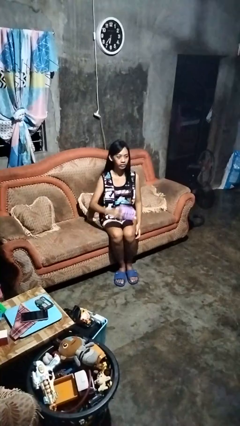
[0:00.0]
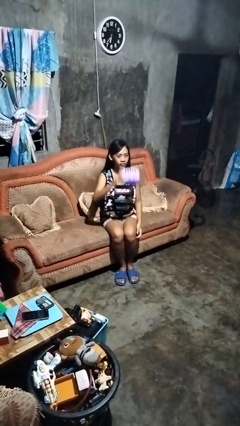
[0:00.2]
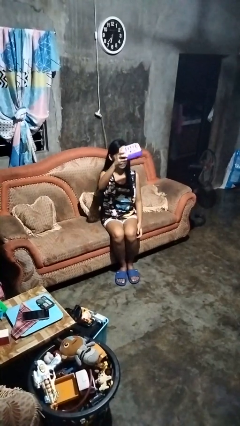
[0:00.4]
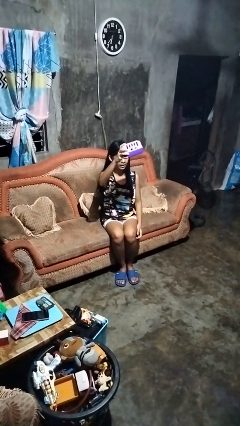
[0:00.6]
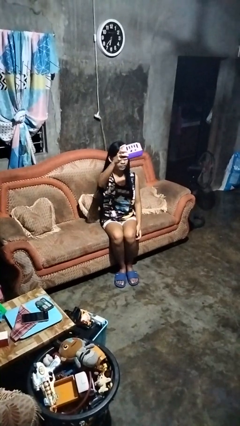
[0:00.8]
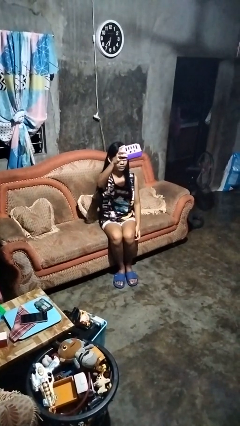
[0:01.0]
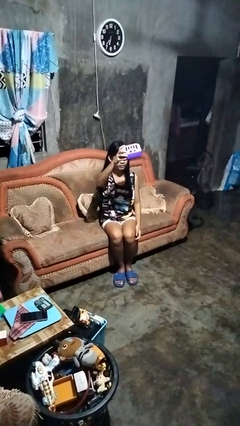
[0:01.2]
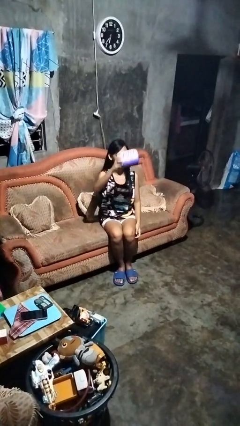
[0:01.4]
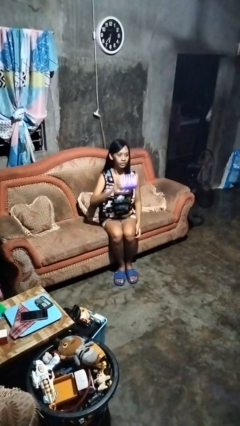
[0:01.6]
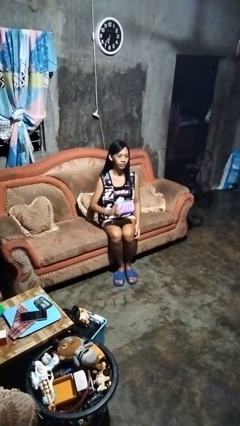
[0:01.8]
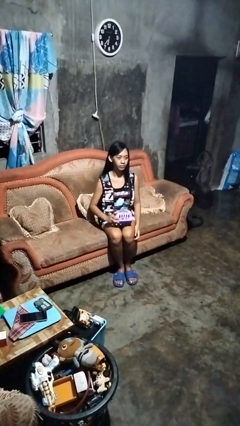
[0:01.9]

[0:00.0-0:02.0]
person holds object above head

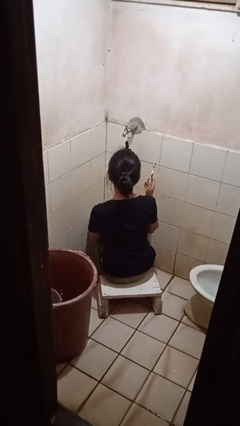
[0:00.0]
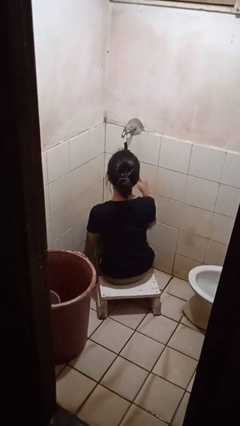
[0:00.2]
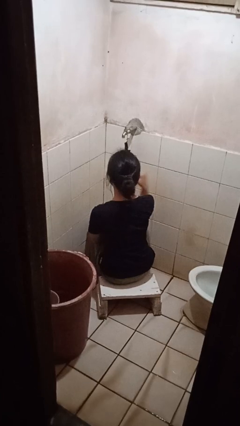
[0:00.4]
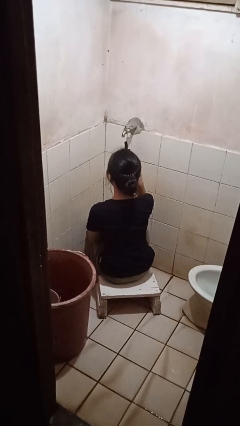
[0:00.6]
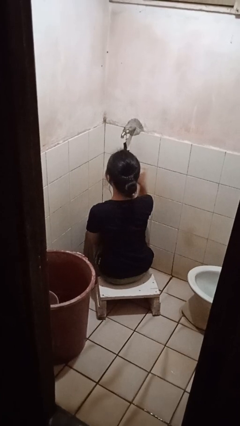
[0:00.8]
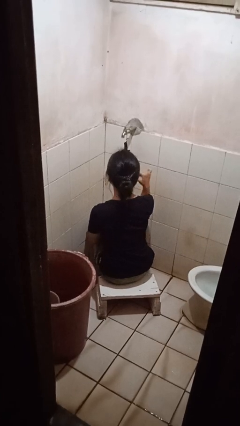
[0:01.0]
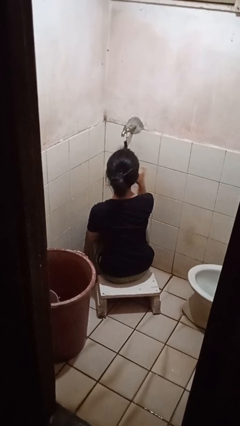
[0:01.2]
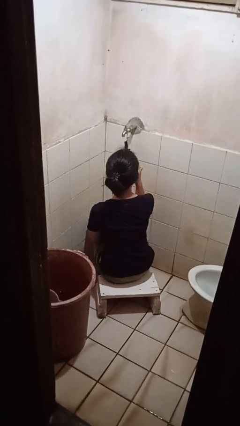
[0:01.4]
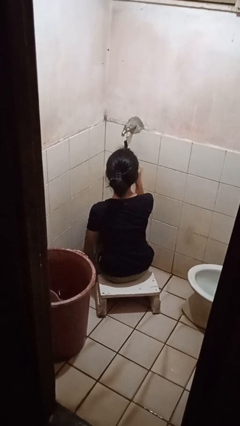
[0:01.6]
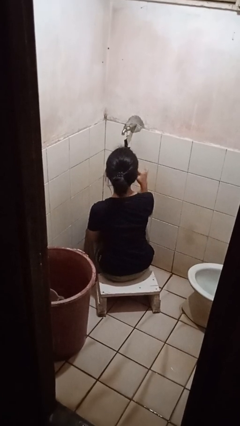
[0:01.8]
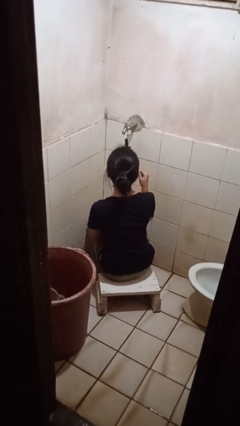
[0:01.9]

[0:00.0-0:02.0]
person brushes teeth

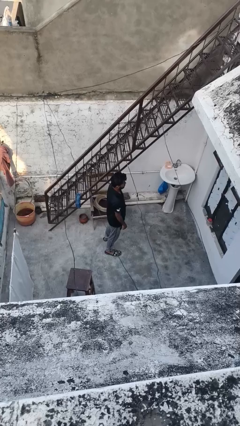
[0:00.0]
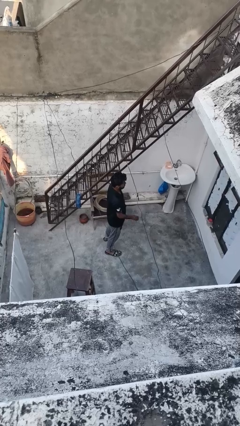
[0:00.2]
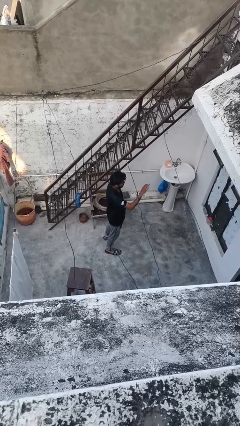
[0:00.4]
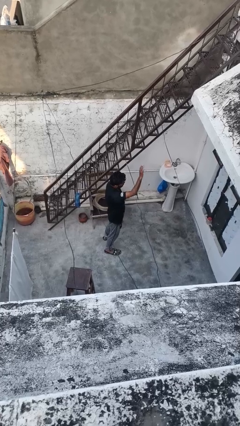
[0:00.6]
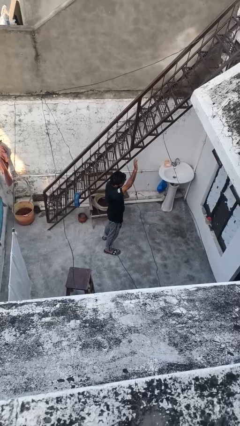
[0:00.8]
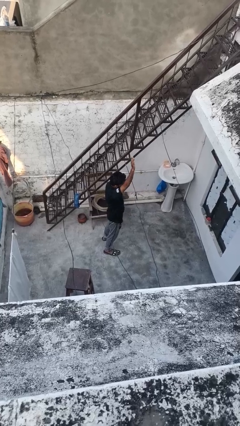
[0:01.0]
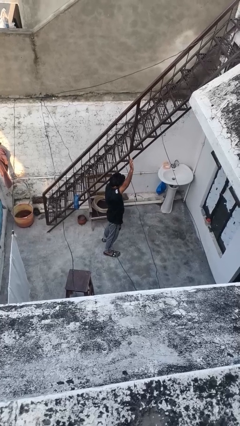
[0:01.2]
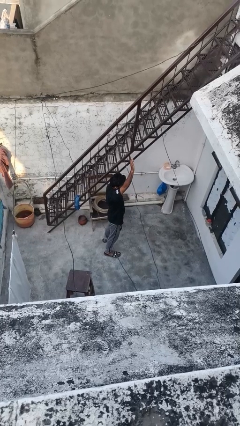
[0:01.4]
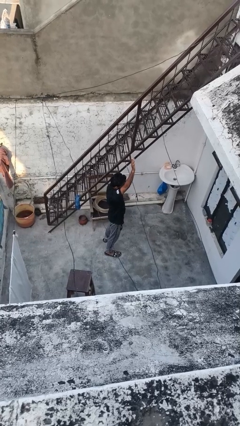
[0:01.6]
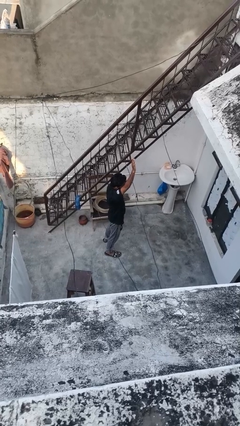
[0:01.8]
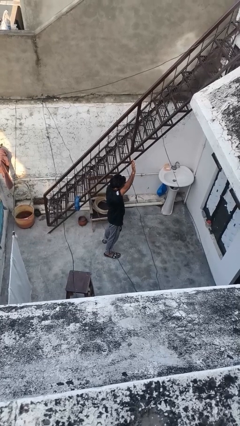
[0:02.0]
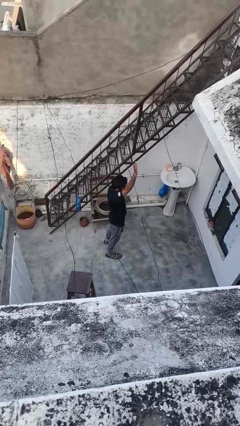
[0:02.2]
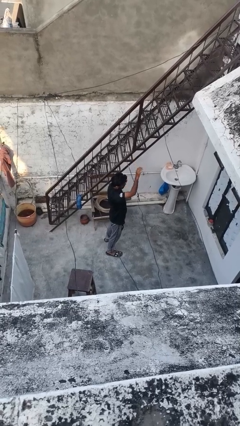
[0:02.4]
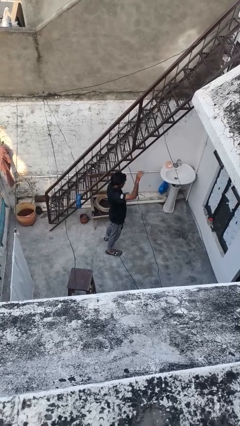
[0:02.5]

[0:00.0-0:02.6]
person gestures raise hand

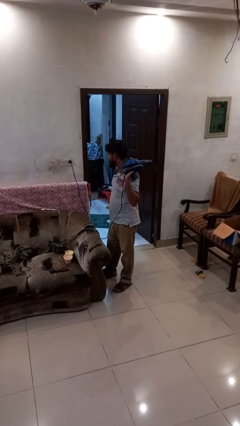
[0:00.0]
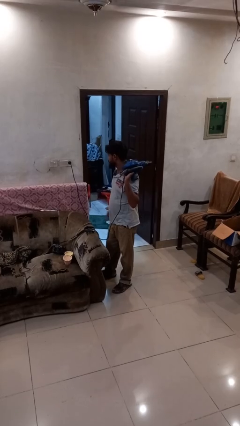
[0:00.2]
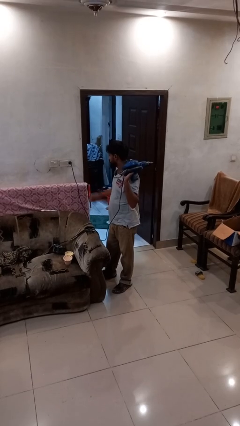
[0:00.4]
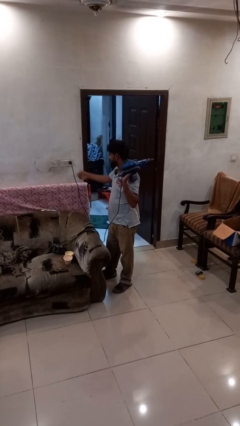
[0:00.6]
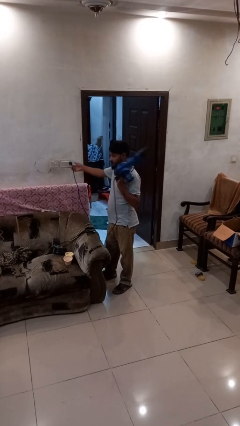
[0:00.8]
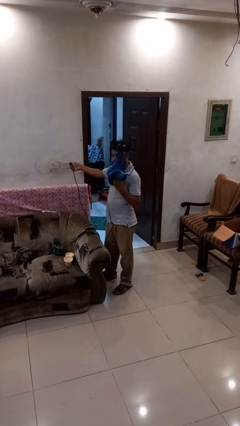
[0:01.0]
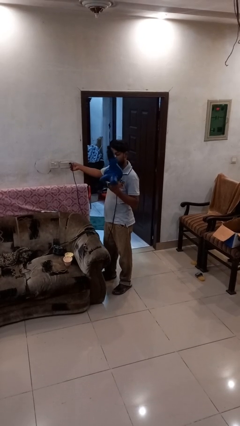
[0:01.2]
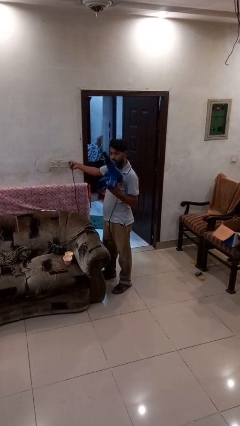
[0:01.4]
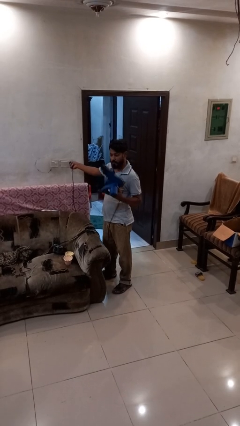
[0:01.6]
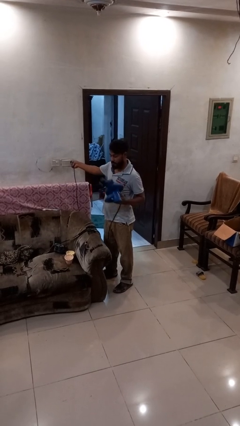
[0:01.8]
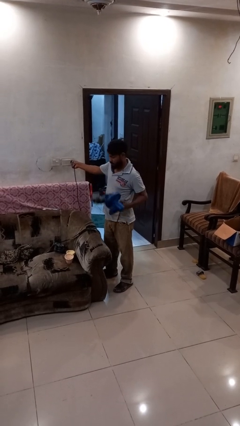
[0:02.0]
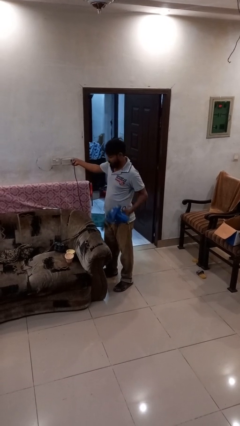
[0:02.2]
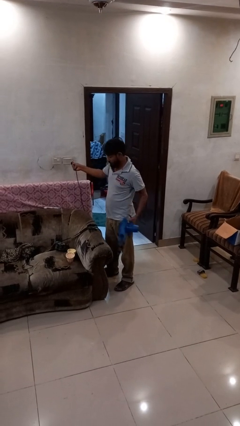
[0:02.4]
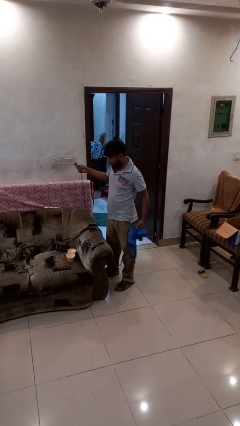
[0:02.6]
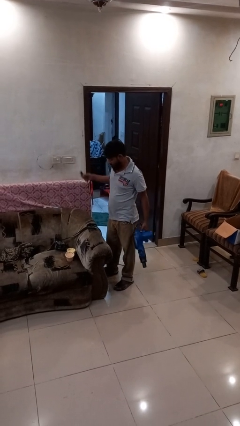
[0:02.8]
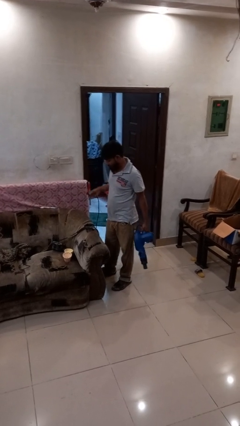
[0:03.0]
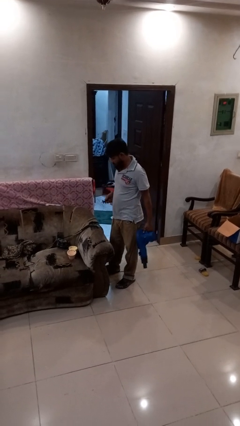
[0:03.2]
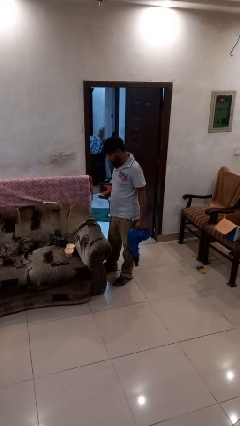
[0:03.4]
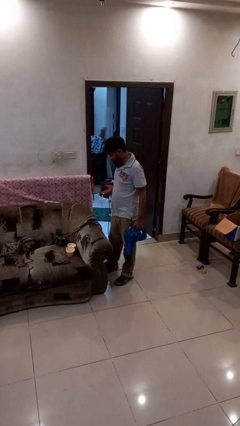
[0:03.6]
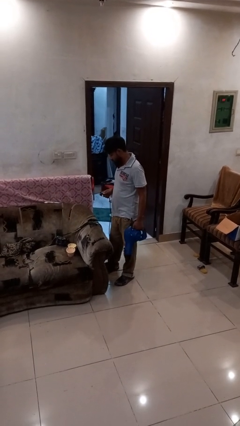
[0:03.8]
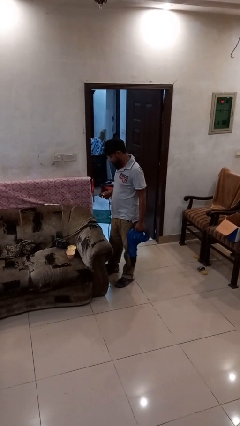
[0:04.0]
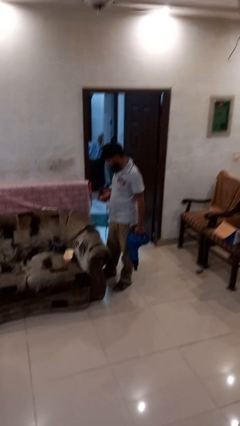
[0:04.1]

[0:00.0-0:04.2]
person unplugs from electrical socket

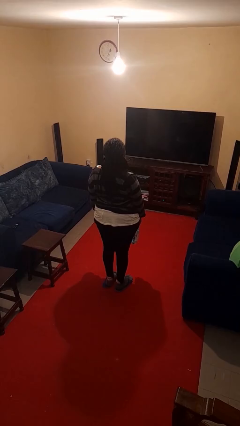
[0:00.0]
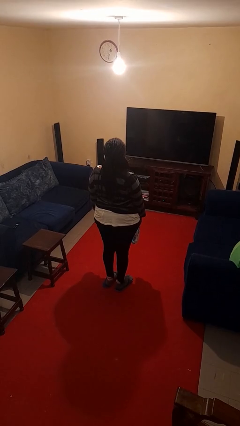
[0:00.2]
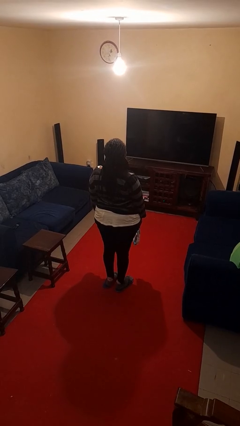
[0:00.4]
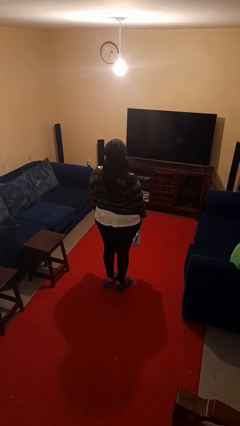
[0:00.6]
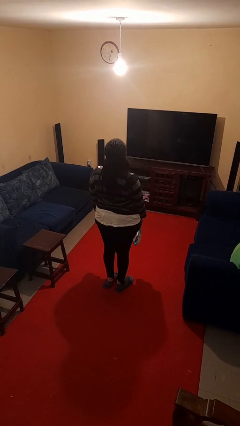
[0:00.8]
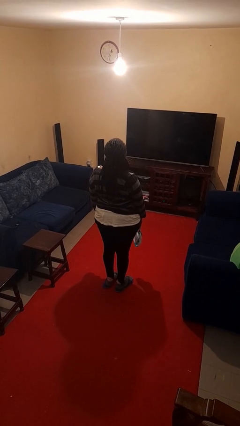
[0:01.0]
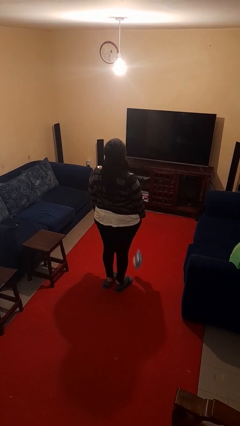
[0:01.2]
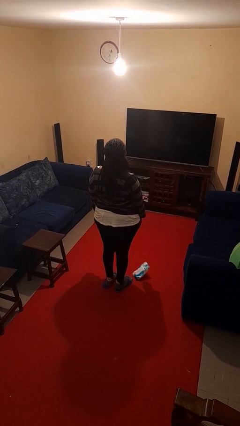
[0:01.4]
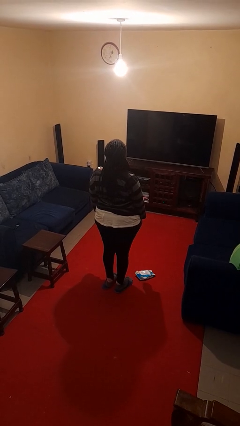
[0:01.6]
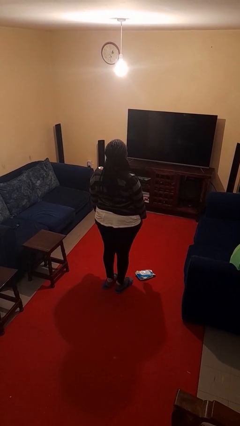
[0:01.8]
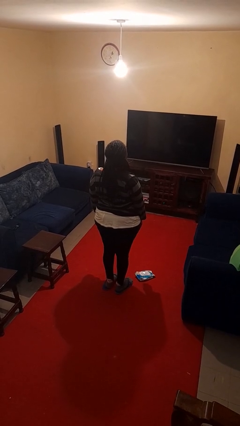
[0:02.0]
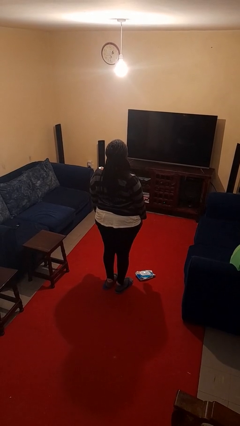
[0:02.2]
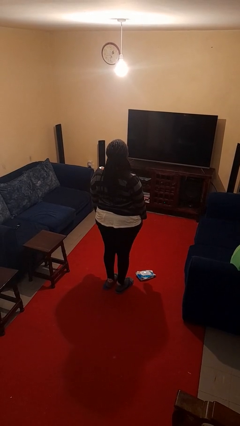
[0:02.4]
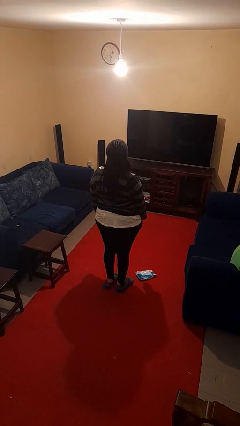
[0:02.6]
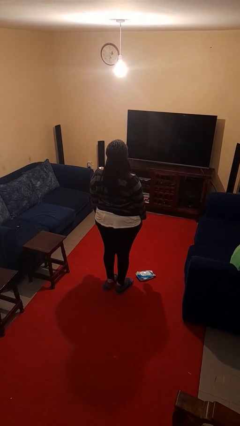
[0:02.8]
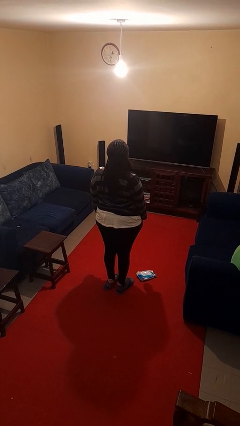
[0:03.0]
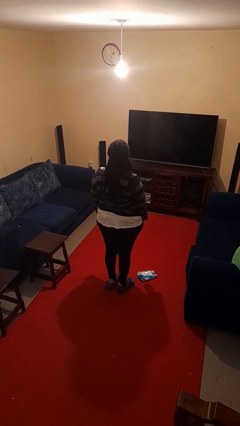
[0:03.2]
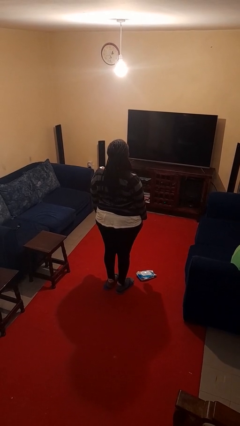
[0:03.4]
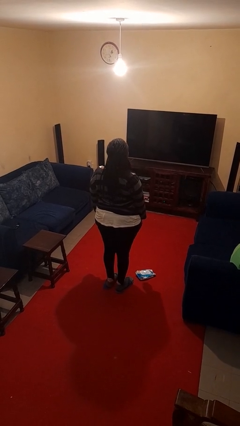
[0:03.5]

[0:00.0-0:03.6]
person drops object

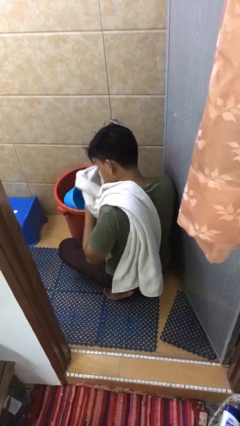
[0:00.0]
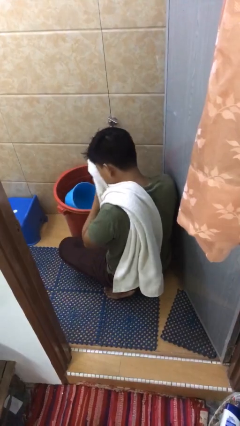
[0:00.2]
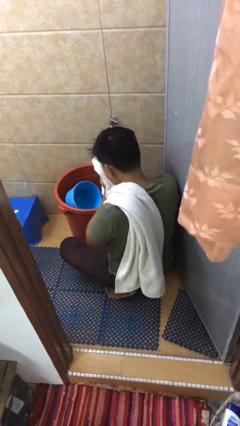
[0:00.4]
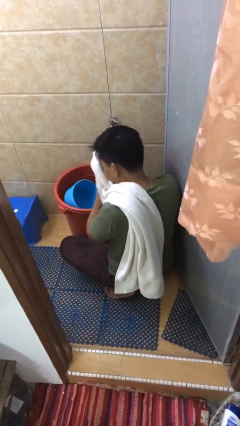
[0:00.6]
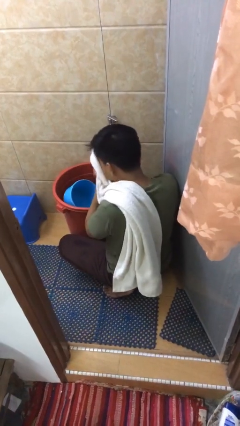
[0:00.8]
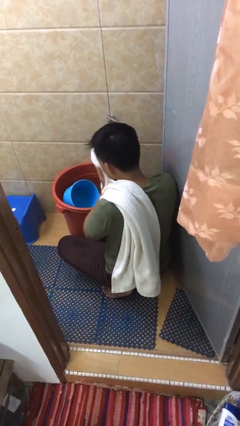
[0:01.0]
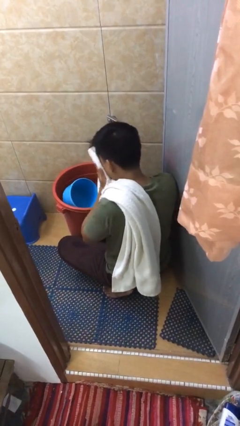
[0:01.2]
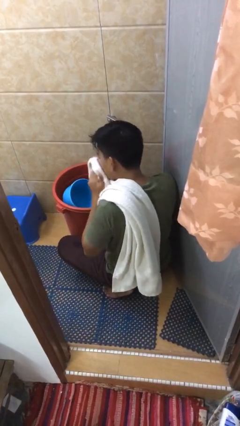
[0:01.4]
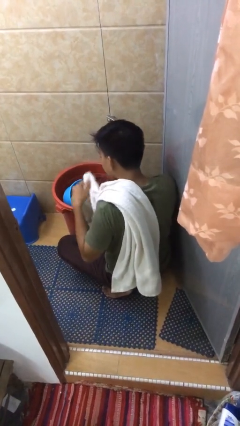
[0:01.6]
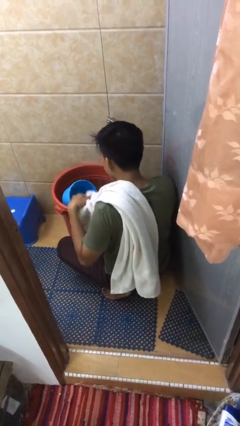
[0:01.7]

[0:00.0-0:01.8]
person dries face with towel

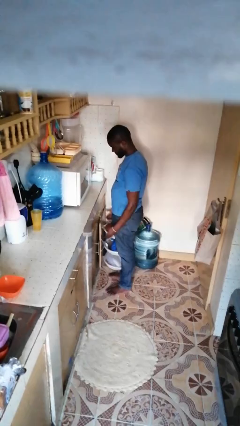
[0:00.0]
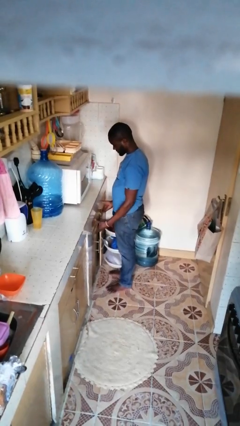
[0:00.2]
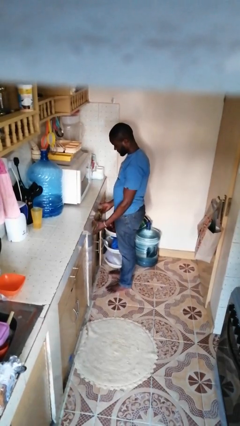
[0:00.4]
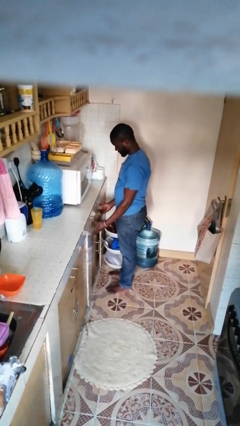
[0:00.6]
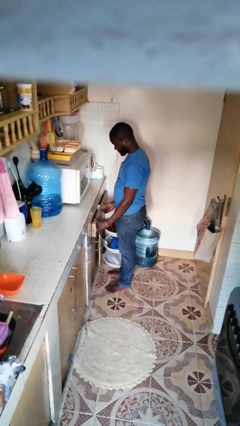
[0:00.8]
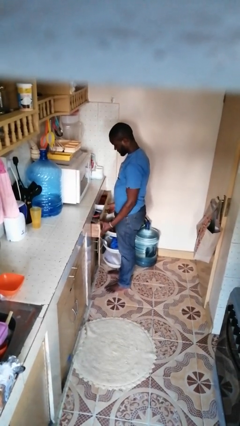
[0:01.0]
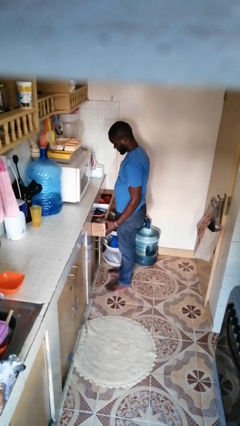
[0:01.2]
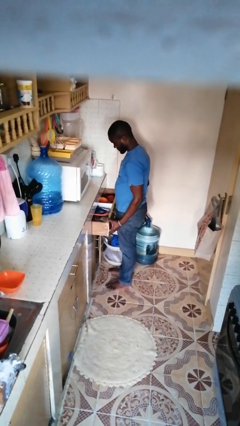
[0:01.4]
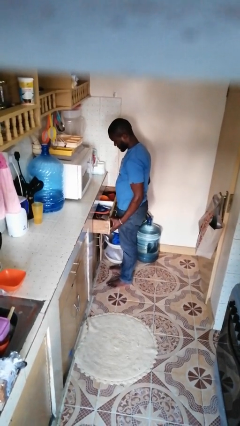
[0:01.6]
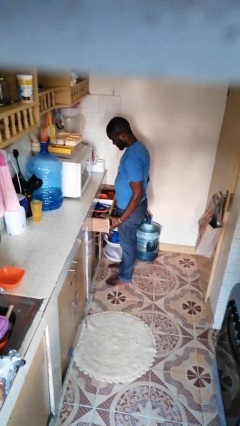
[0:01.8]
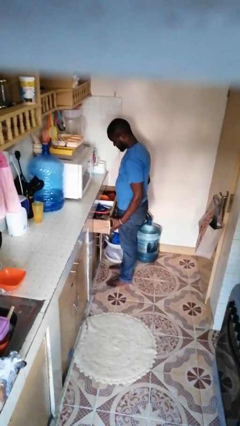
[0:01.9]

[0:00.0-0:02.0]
person opens kitchen drawer
